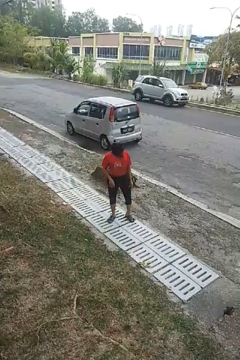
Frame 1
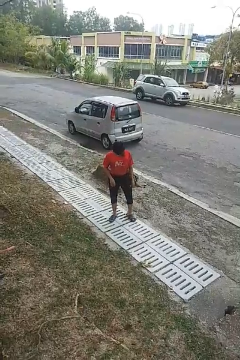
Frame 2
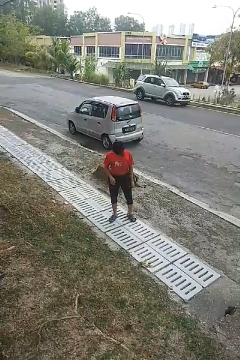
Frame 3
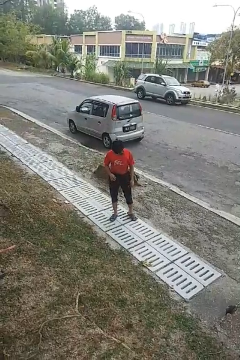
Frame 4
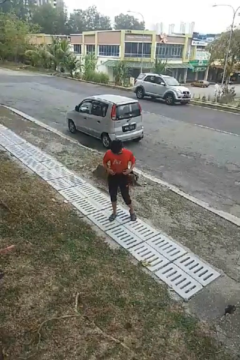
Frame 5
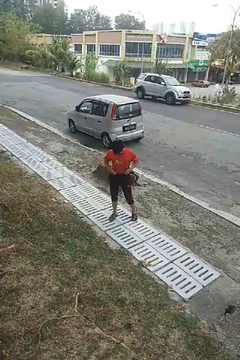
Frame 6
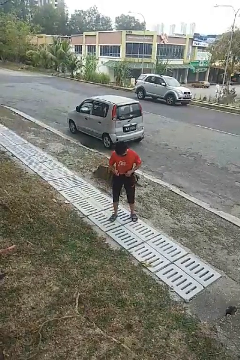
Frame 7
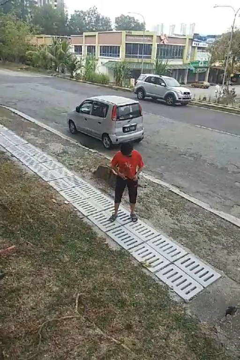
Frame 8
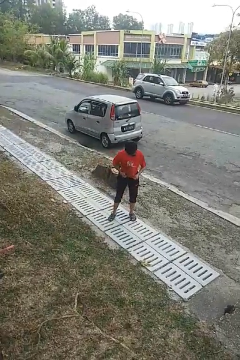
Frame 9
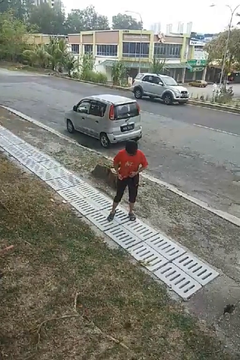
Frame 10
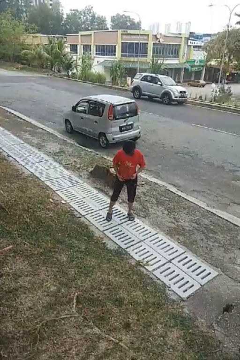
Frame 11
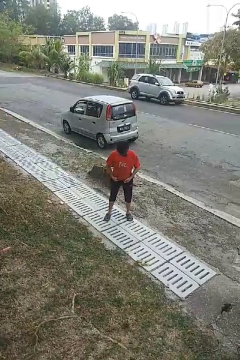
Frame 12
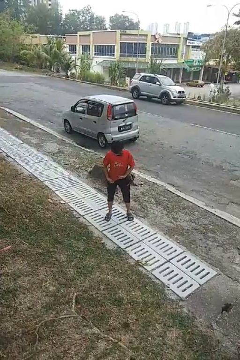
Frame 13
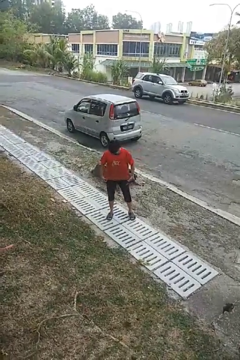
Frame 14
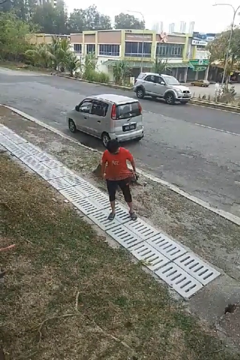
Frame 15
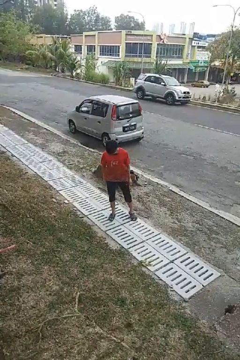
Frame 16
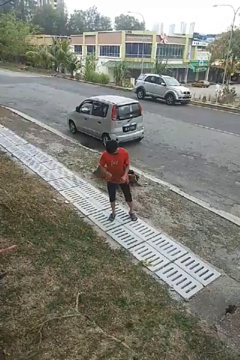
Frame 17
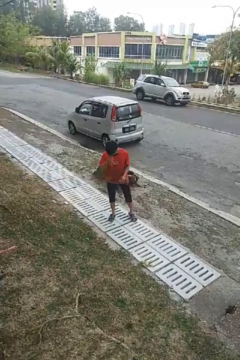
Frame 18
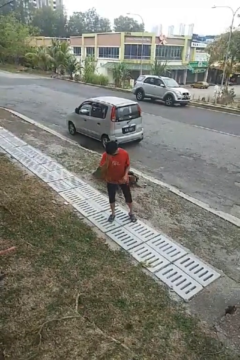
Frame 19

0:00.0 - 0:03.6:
person untucks shirt

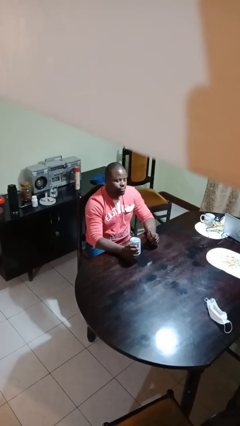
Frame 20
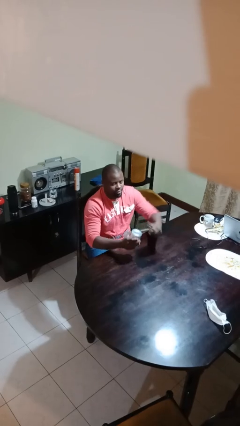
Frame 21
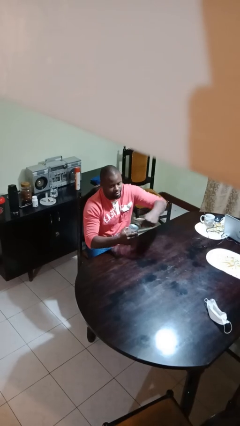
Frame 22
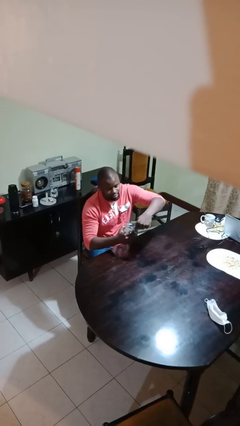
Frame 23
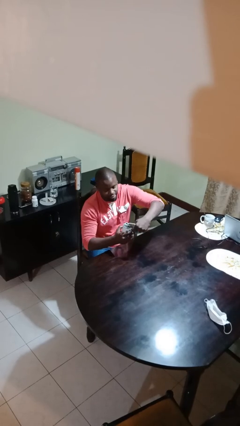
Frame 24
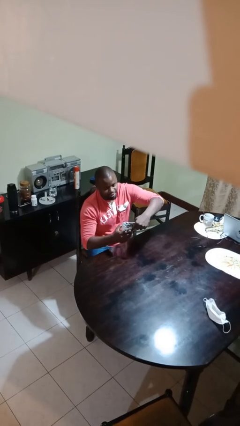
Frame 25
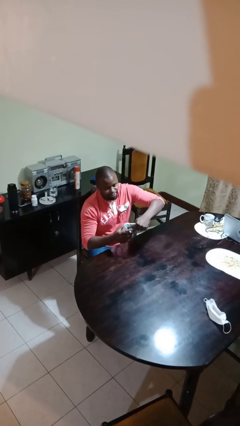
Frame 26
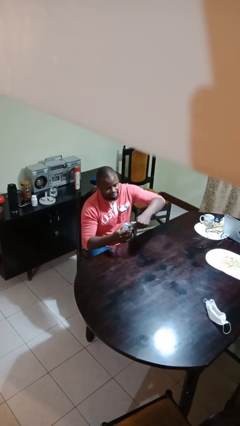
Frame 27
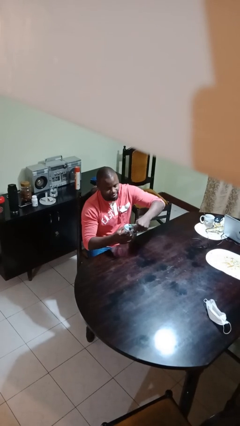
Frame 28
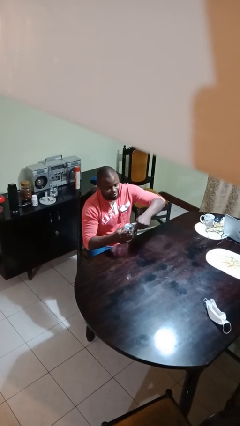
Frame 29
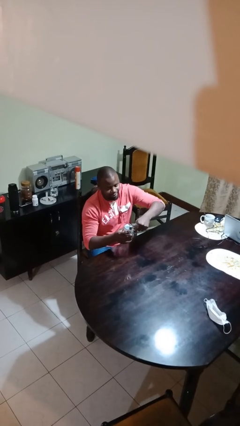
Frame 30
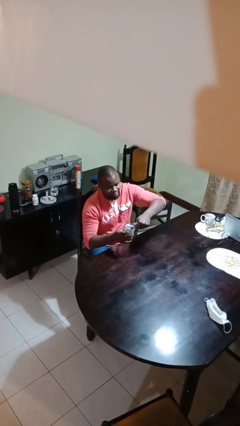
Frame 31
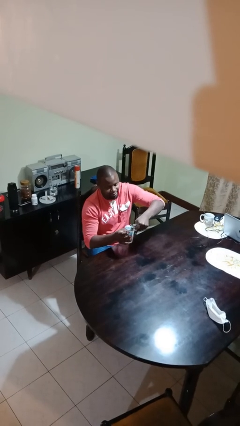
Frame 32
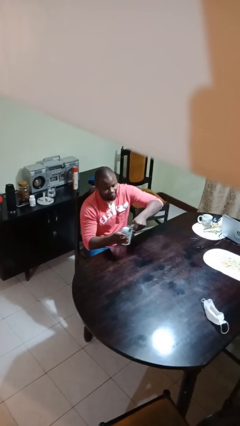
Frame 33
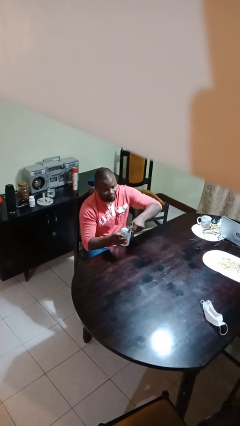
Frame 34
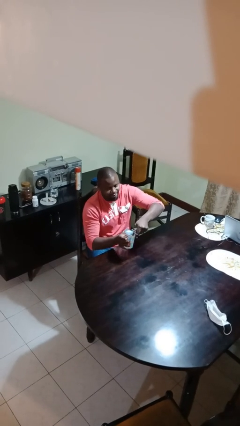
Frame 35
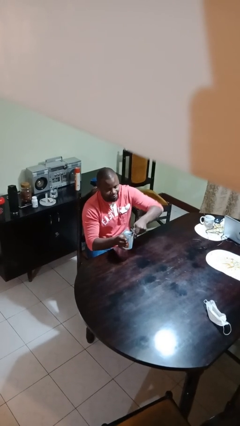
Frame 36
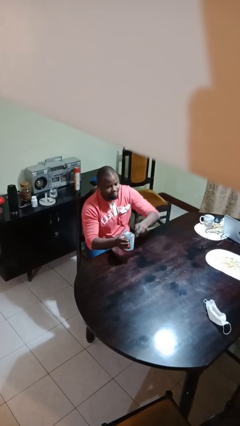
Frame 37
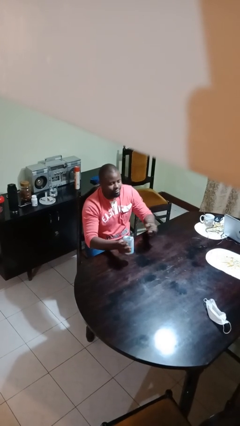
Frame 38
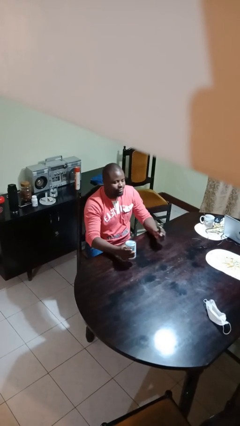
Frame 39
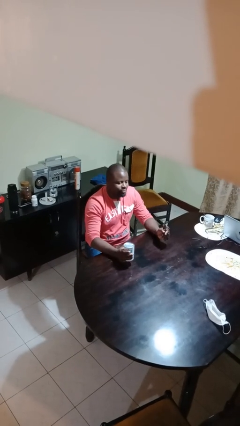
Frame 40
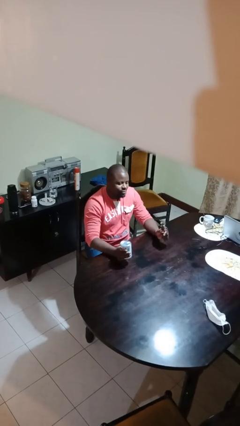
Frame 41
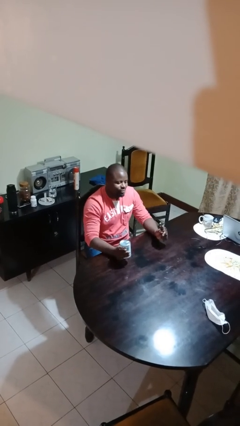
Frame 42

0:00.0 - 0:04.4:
person opens can with can opener

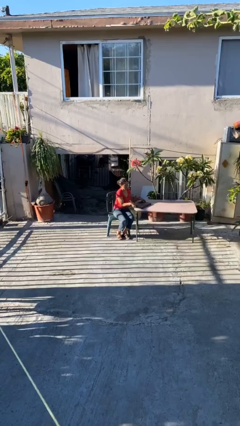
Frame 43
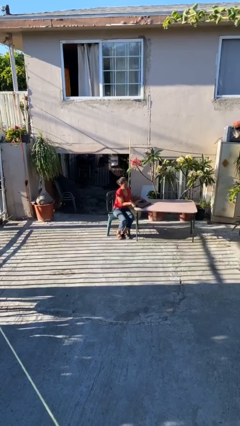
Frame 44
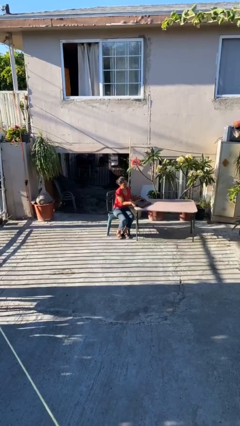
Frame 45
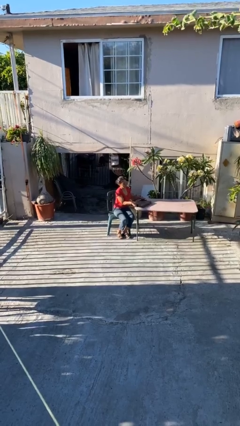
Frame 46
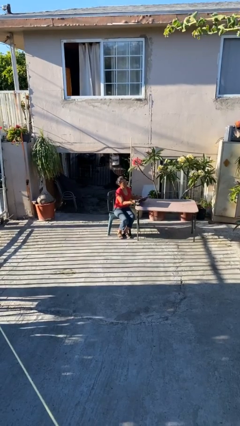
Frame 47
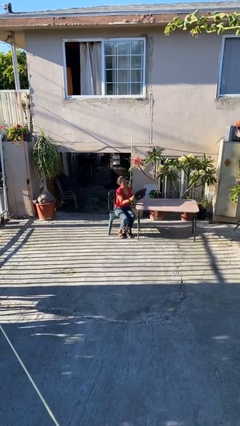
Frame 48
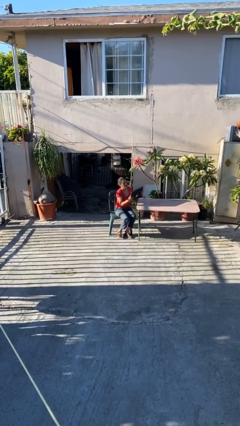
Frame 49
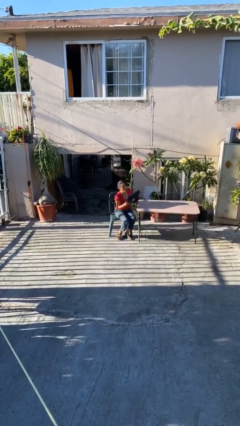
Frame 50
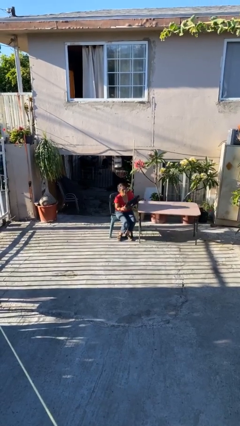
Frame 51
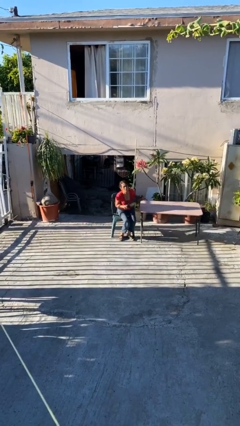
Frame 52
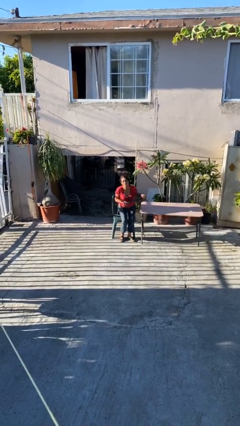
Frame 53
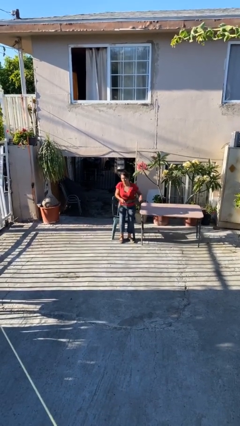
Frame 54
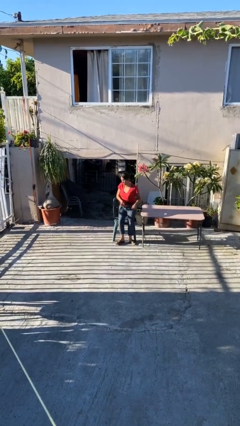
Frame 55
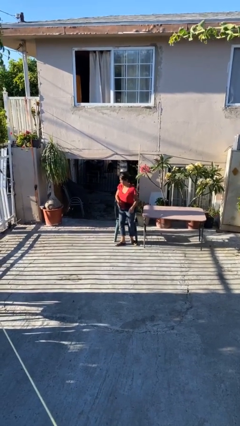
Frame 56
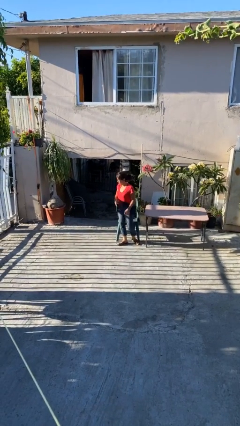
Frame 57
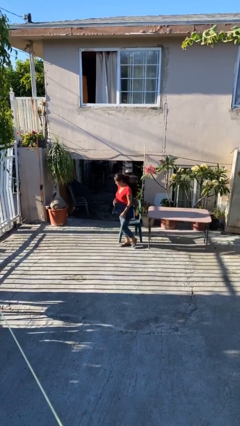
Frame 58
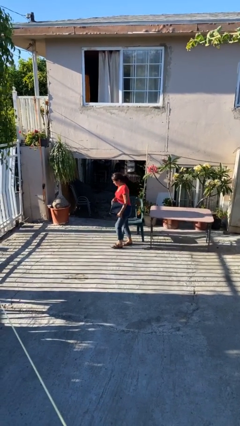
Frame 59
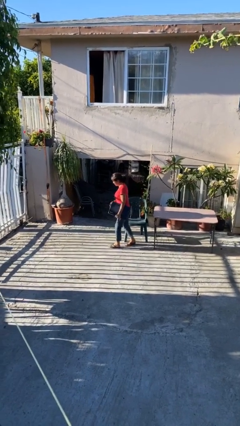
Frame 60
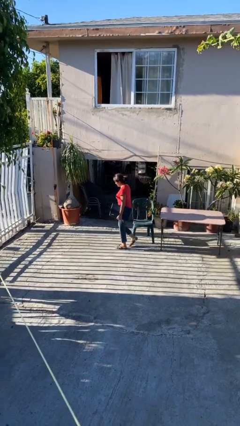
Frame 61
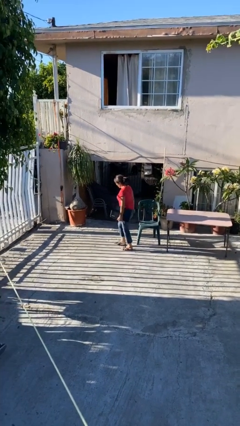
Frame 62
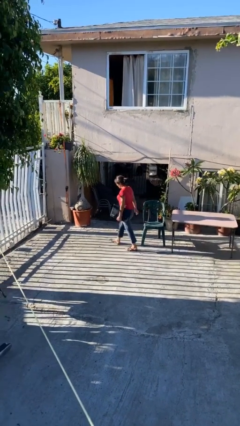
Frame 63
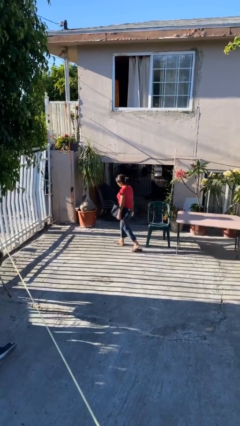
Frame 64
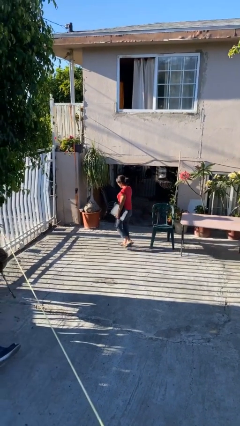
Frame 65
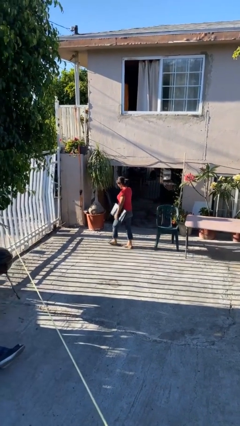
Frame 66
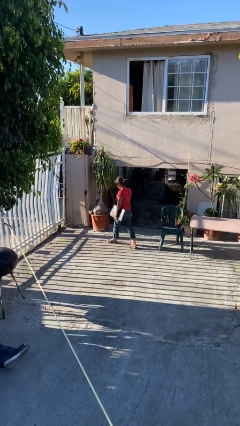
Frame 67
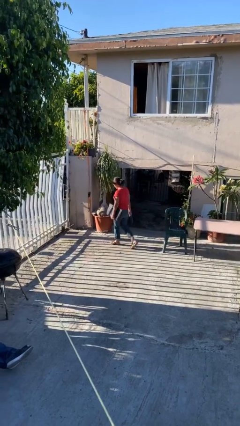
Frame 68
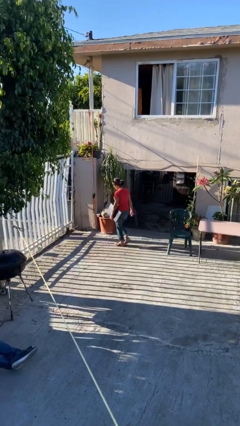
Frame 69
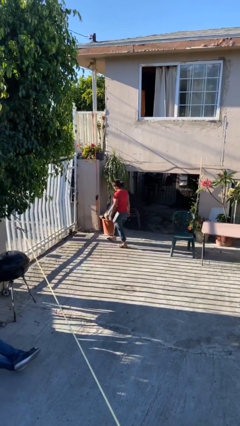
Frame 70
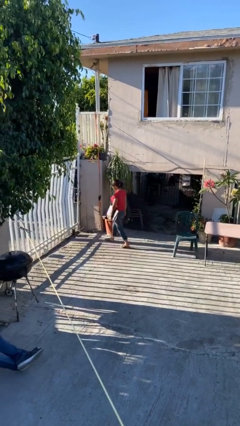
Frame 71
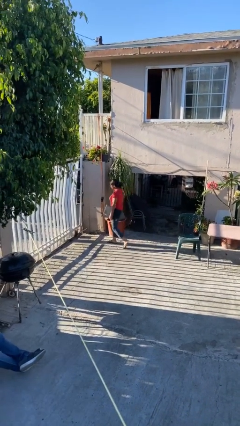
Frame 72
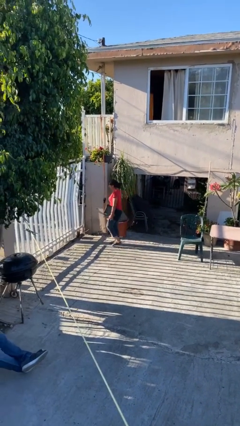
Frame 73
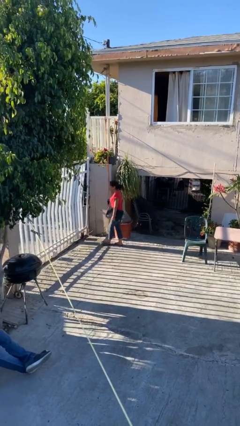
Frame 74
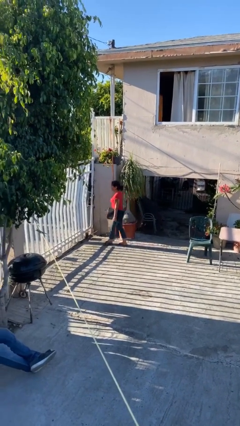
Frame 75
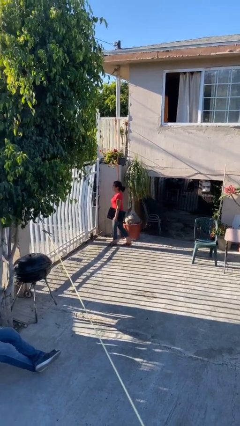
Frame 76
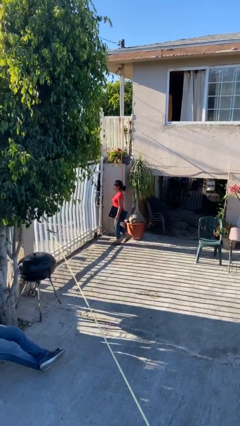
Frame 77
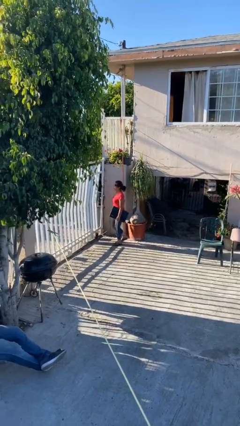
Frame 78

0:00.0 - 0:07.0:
person stands up

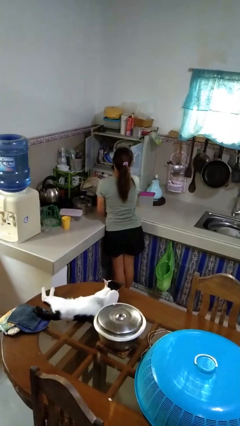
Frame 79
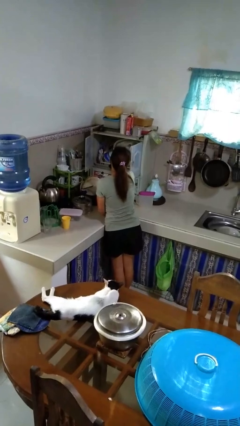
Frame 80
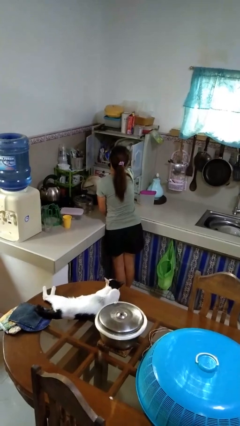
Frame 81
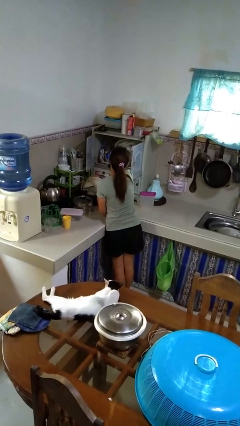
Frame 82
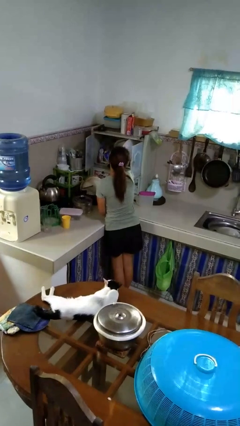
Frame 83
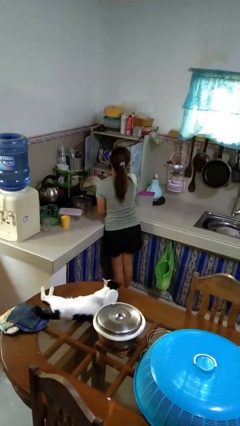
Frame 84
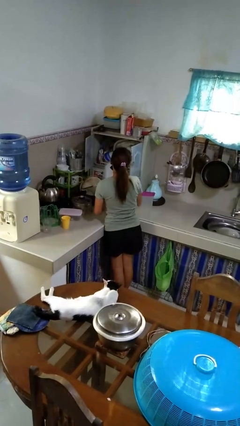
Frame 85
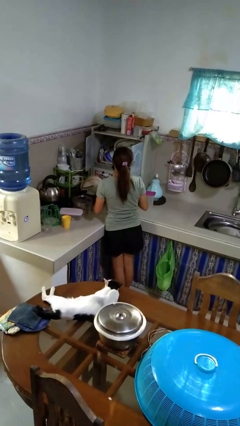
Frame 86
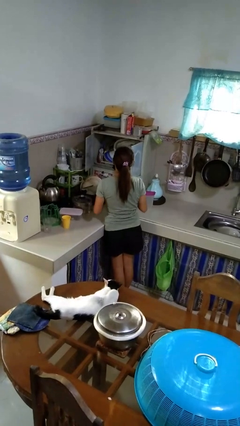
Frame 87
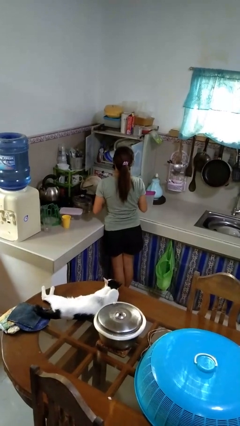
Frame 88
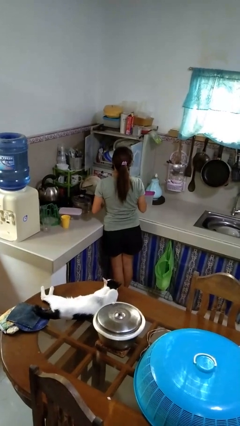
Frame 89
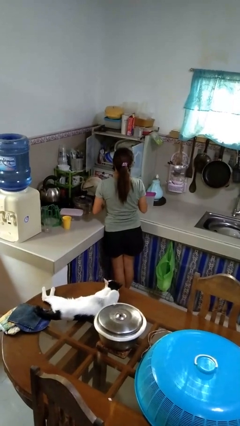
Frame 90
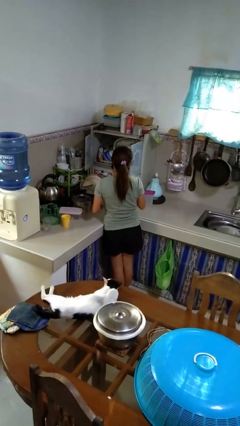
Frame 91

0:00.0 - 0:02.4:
person takes object from kitchen drawer

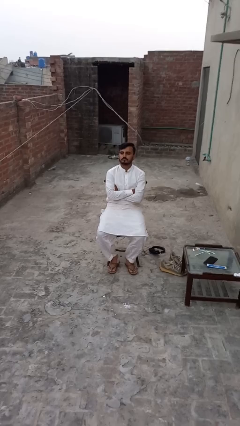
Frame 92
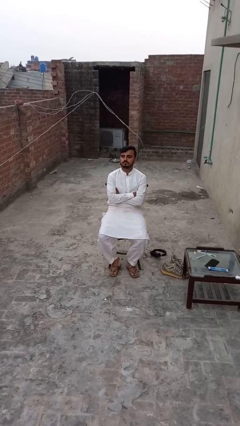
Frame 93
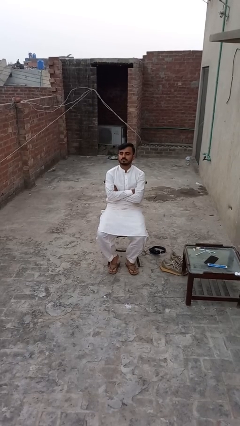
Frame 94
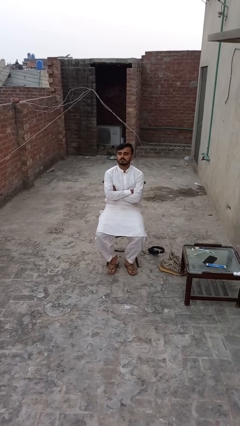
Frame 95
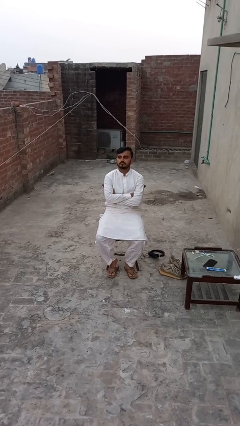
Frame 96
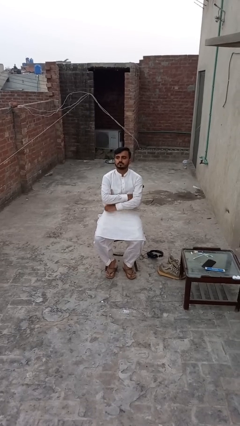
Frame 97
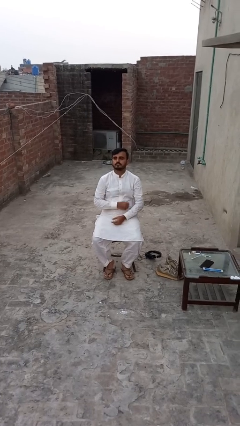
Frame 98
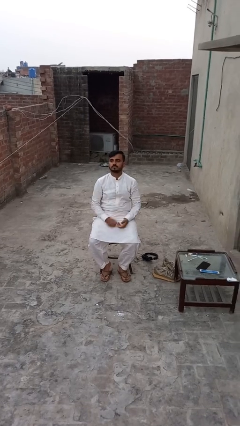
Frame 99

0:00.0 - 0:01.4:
person crosses arms
